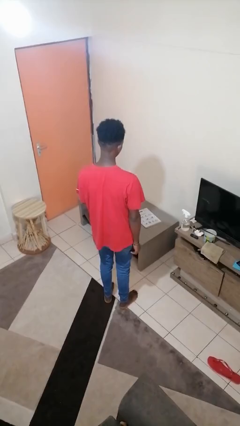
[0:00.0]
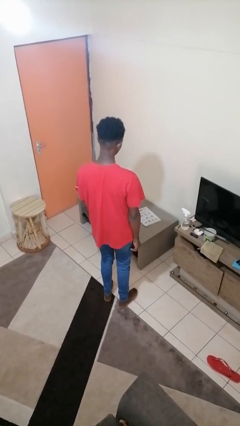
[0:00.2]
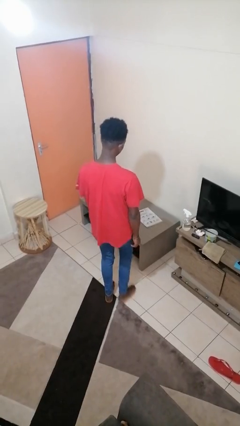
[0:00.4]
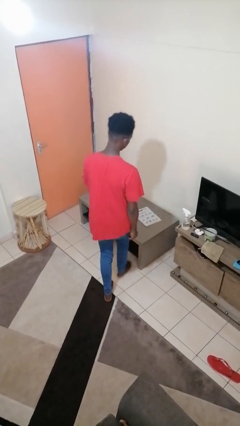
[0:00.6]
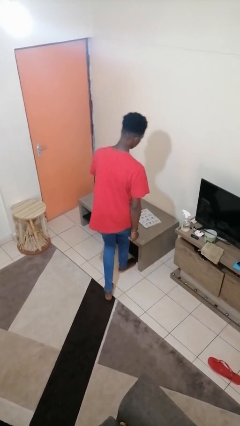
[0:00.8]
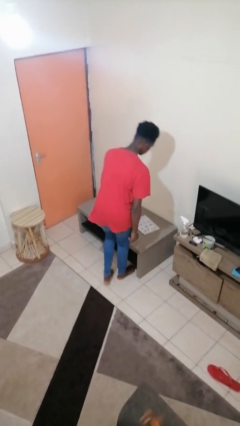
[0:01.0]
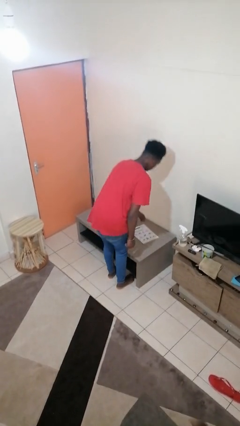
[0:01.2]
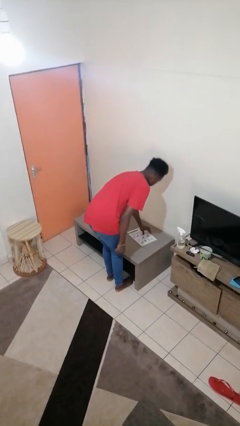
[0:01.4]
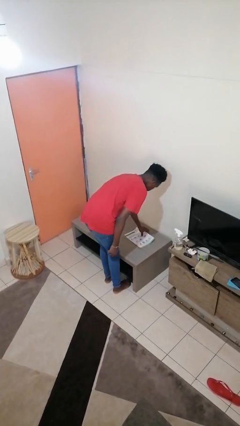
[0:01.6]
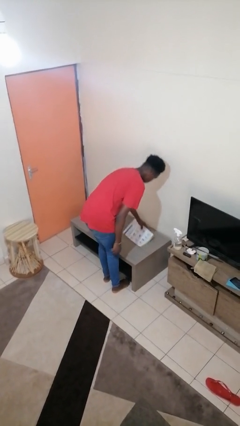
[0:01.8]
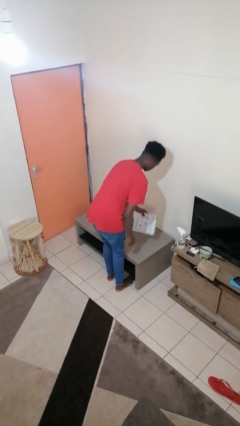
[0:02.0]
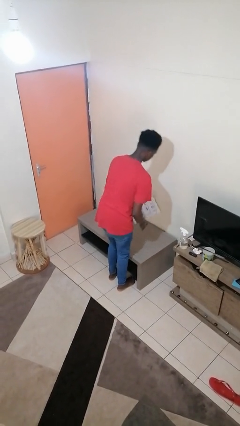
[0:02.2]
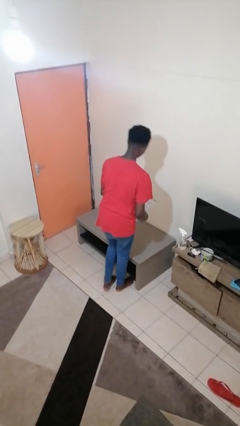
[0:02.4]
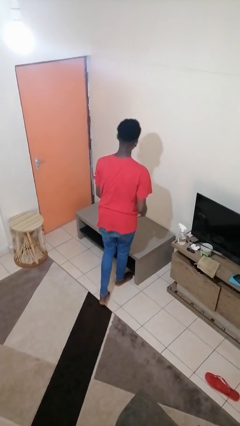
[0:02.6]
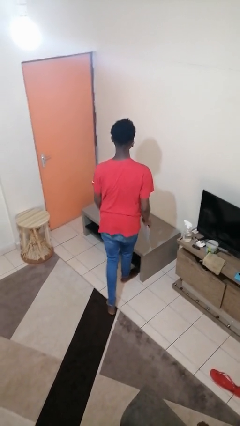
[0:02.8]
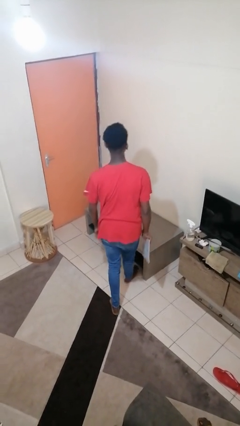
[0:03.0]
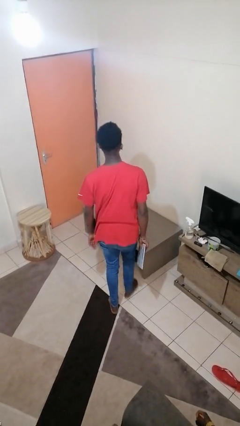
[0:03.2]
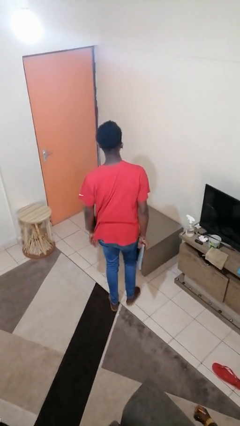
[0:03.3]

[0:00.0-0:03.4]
person picks up object from table

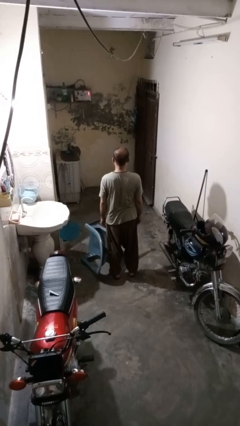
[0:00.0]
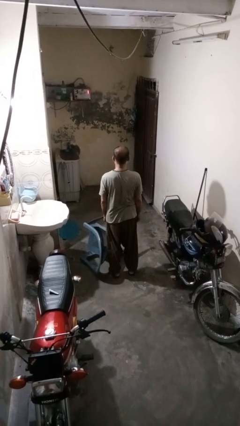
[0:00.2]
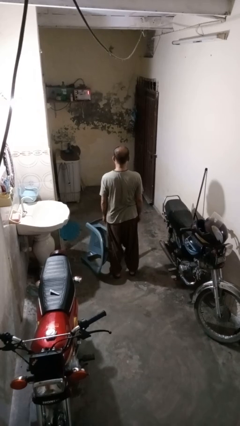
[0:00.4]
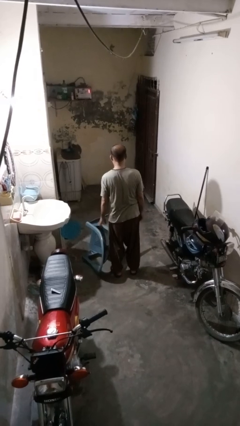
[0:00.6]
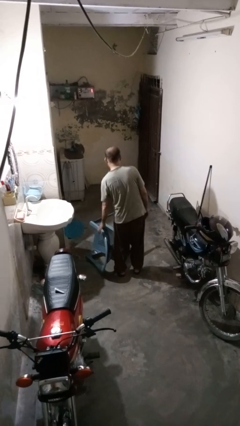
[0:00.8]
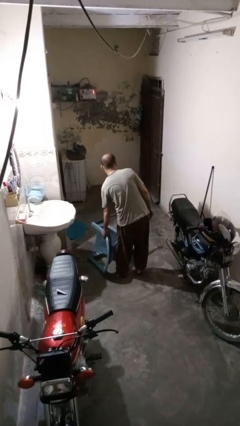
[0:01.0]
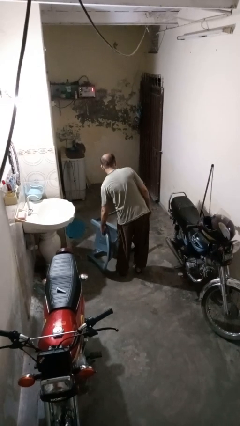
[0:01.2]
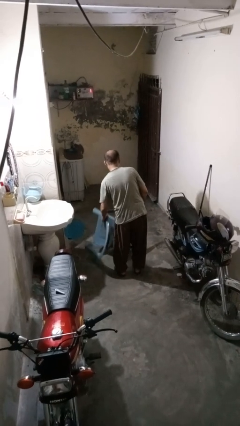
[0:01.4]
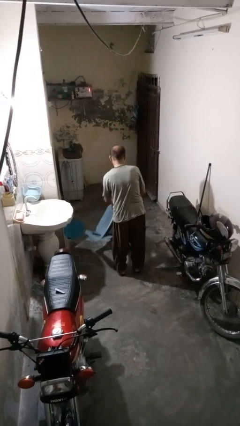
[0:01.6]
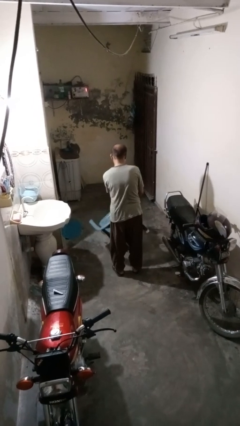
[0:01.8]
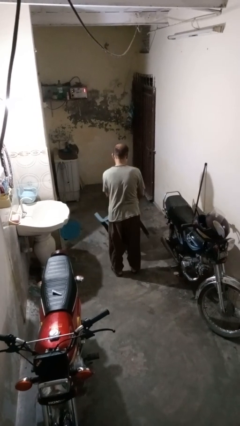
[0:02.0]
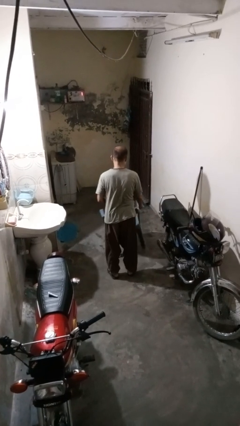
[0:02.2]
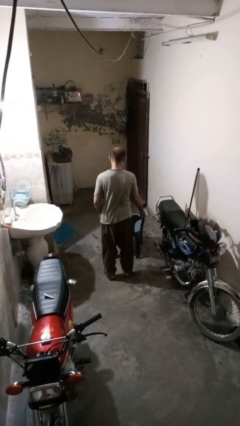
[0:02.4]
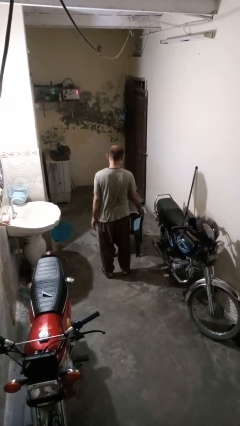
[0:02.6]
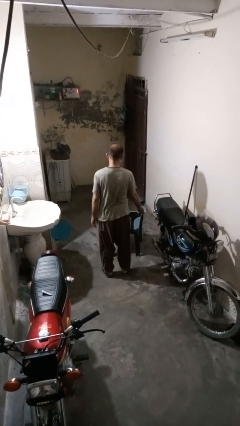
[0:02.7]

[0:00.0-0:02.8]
person sets upright furniture

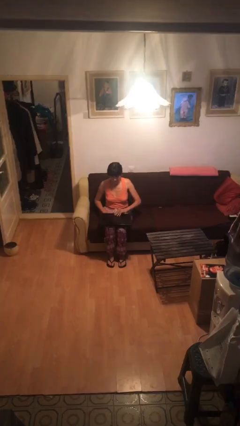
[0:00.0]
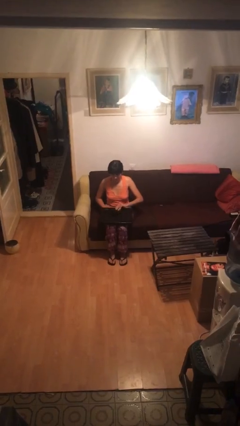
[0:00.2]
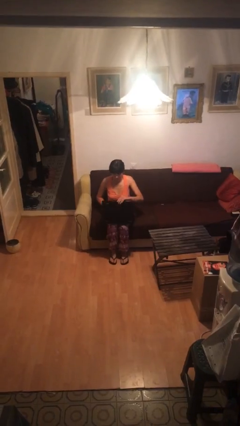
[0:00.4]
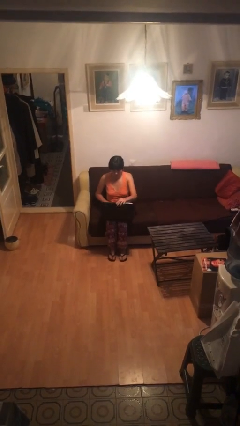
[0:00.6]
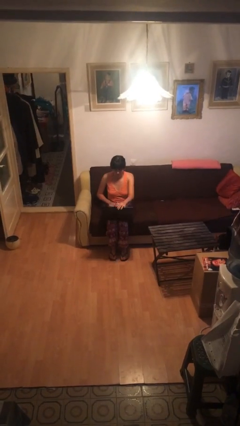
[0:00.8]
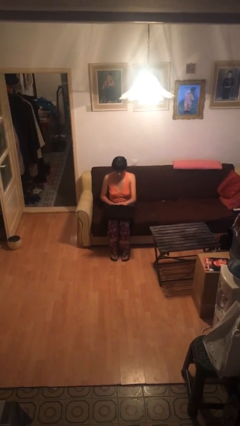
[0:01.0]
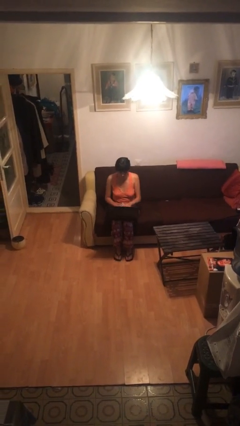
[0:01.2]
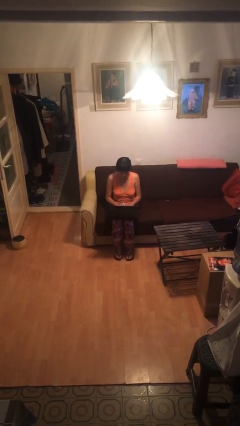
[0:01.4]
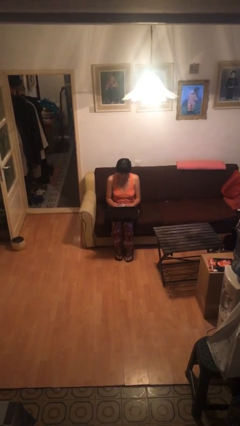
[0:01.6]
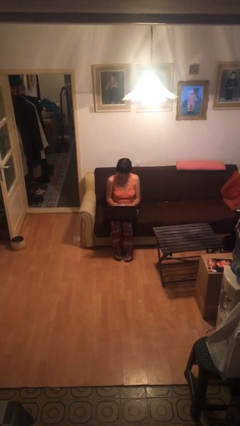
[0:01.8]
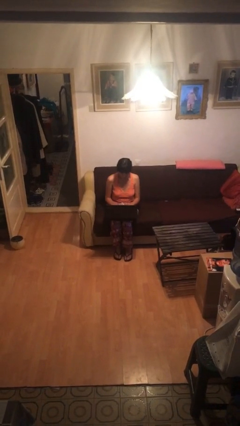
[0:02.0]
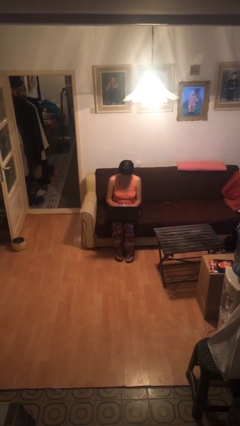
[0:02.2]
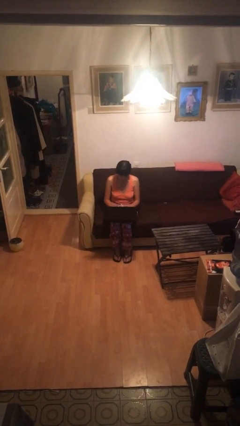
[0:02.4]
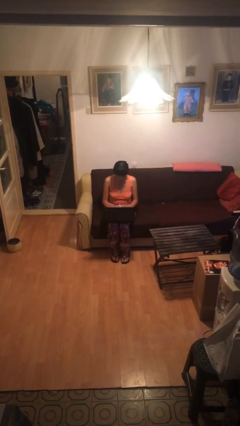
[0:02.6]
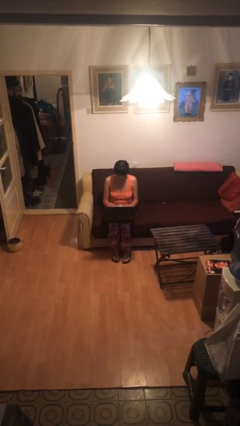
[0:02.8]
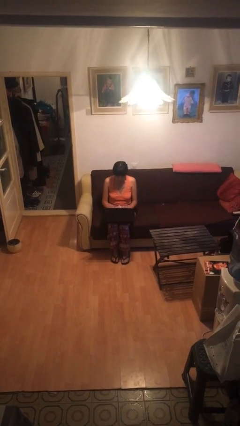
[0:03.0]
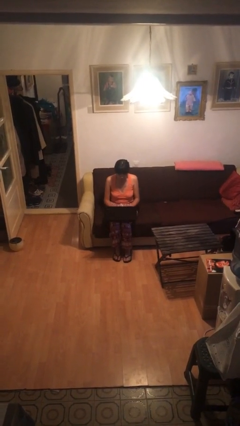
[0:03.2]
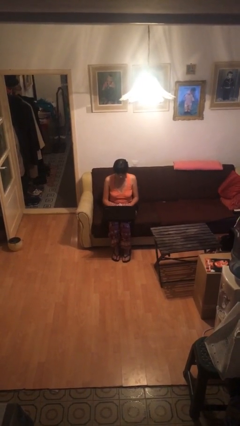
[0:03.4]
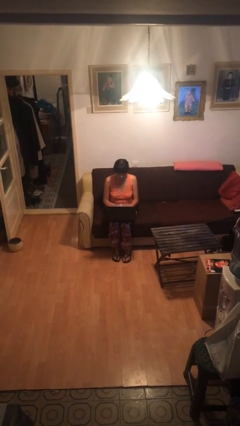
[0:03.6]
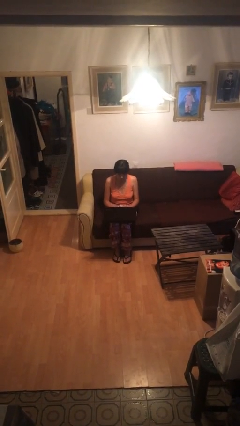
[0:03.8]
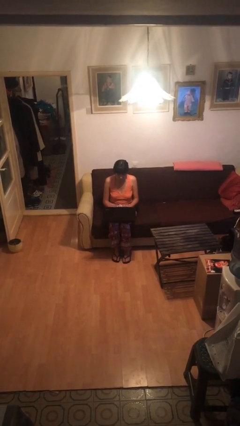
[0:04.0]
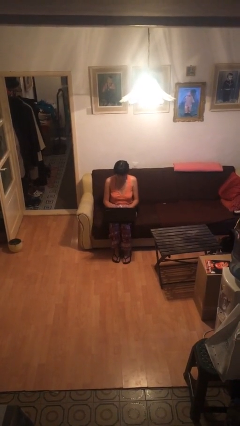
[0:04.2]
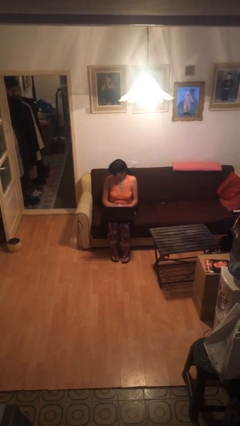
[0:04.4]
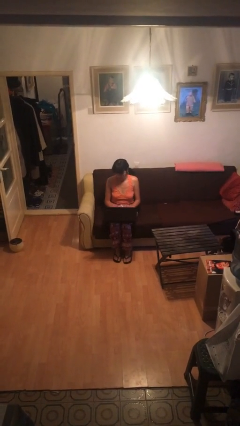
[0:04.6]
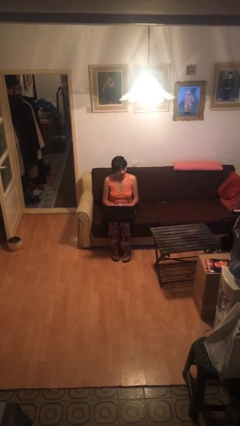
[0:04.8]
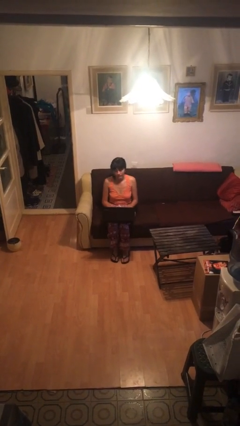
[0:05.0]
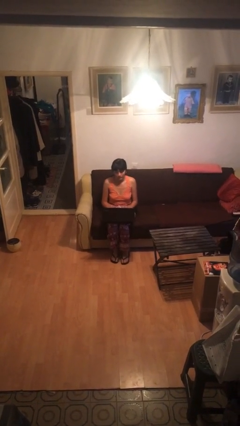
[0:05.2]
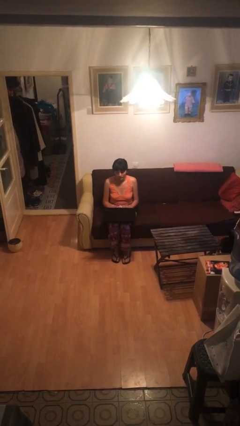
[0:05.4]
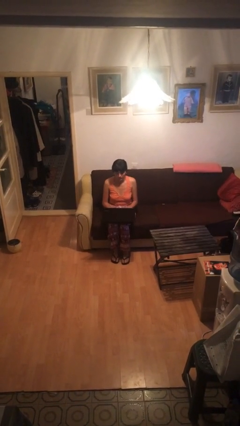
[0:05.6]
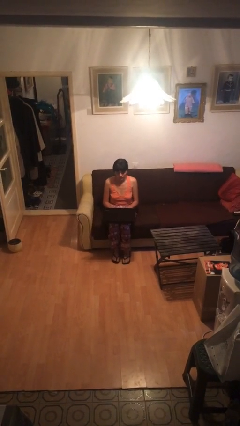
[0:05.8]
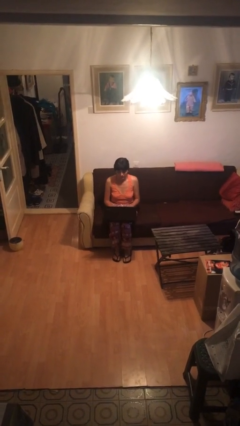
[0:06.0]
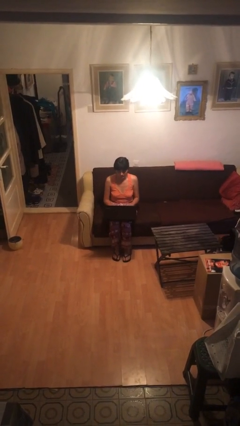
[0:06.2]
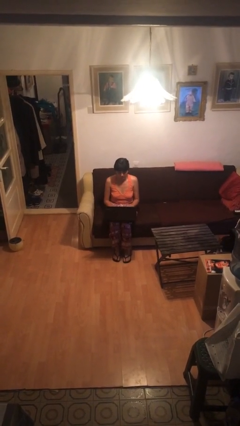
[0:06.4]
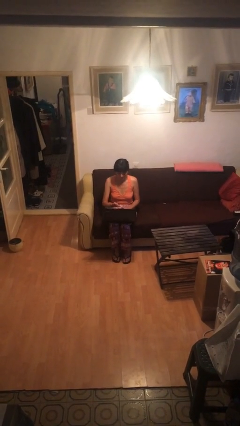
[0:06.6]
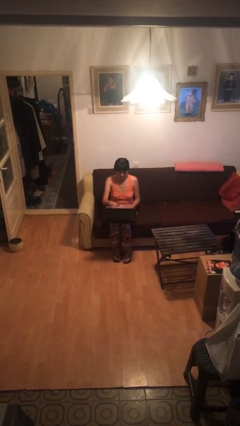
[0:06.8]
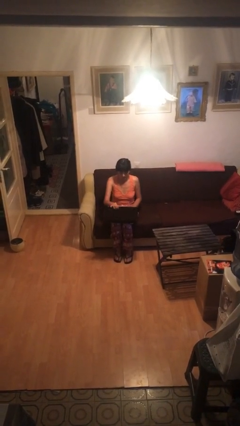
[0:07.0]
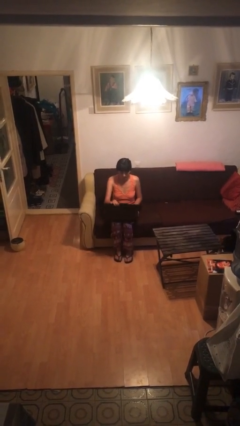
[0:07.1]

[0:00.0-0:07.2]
person interacts with laptop

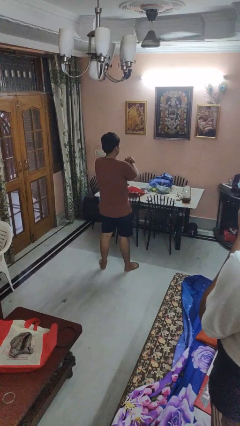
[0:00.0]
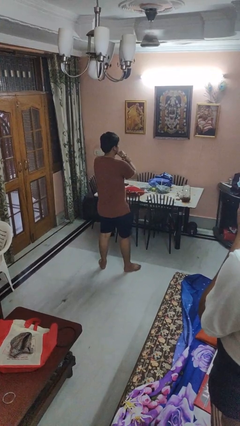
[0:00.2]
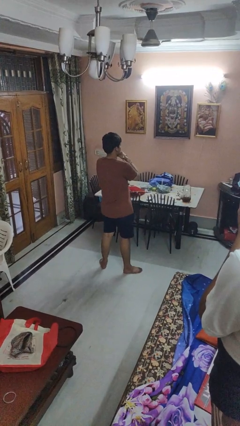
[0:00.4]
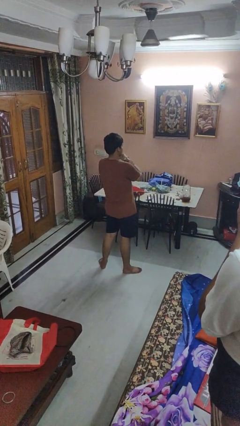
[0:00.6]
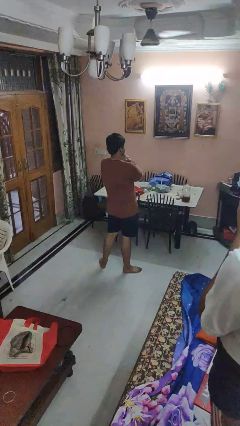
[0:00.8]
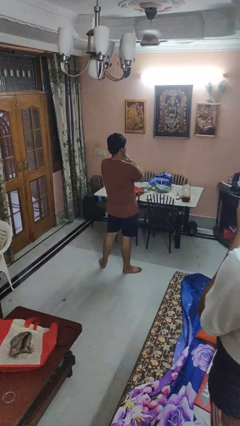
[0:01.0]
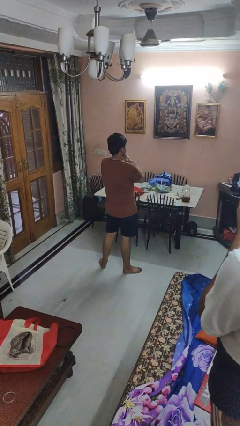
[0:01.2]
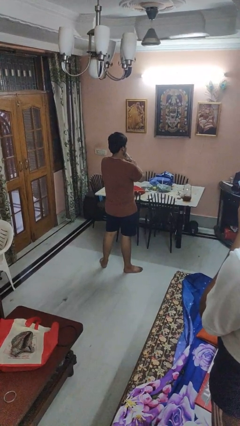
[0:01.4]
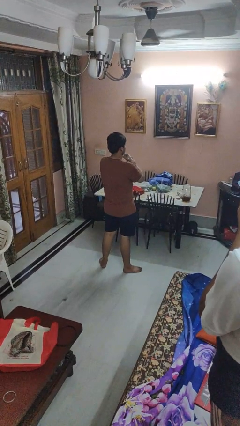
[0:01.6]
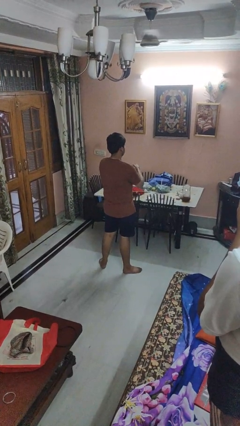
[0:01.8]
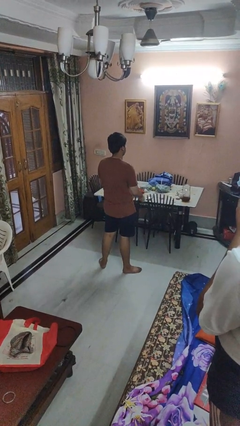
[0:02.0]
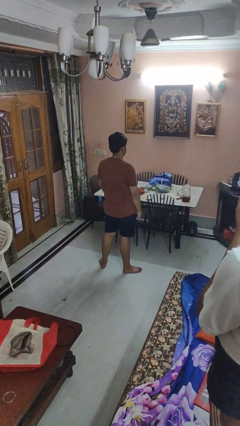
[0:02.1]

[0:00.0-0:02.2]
person gestures arms x

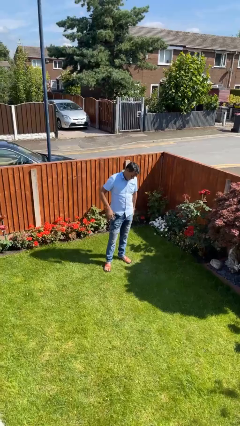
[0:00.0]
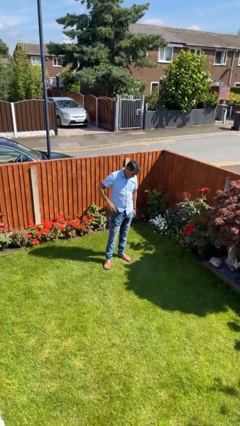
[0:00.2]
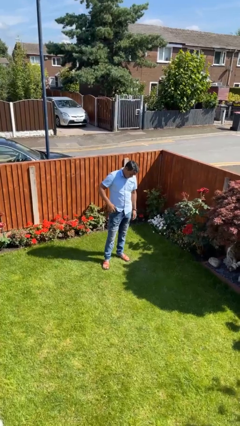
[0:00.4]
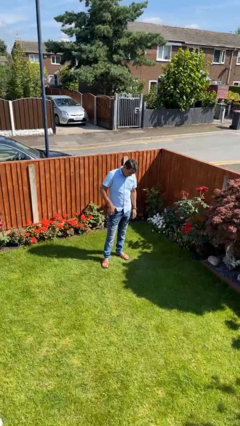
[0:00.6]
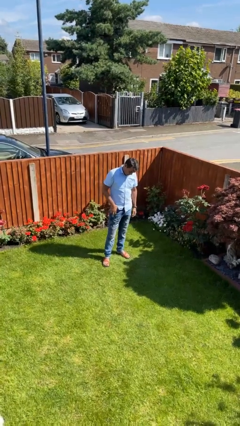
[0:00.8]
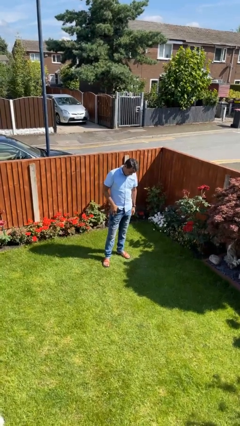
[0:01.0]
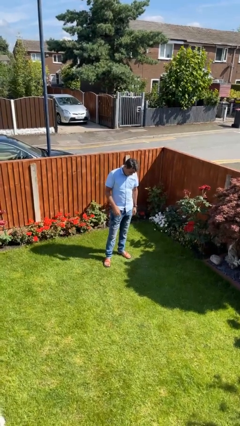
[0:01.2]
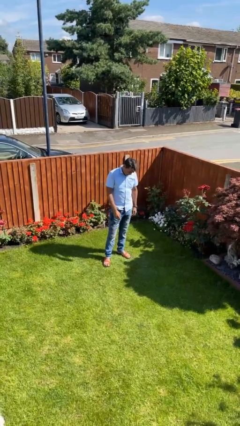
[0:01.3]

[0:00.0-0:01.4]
person puts phone into pocket

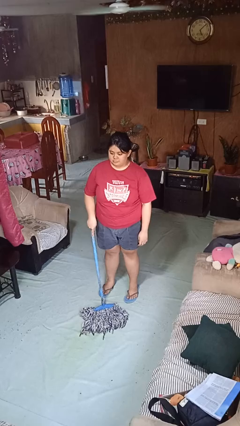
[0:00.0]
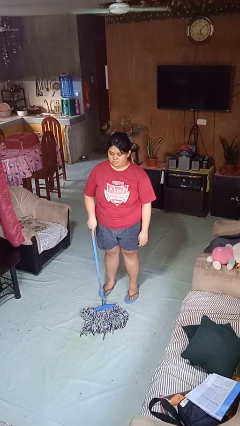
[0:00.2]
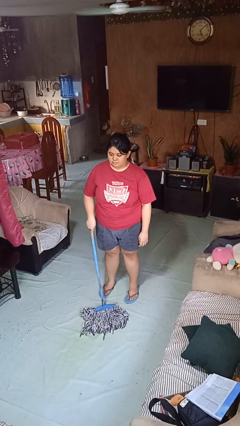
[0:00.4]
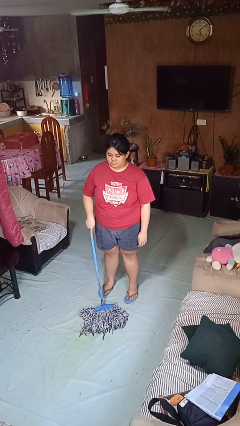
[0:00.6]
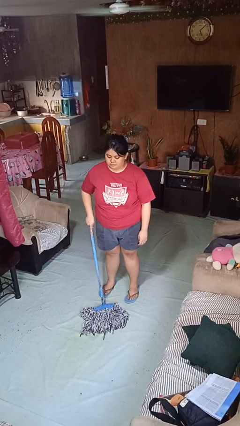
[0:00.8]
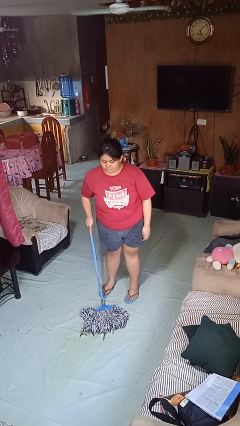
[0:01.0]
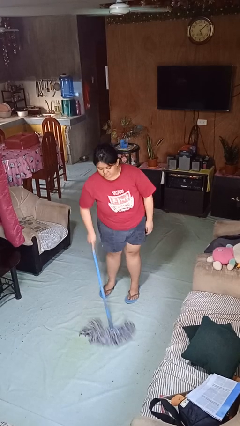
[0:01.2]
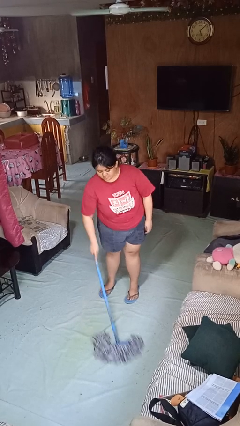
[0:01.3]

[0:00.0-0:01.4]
person mops
